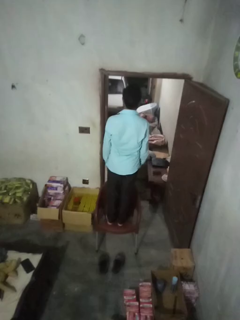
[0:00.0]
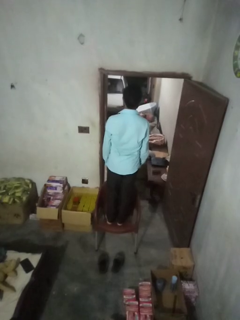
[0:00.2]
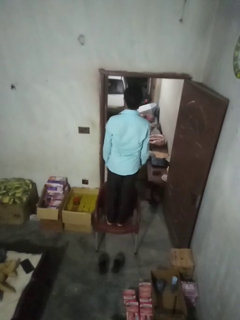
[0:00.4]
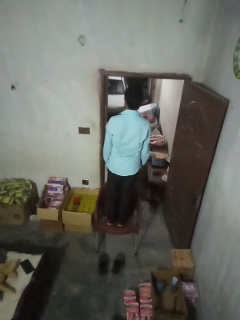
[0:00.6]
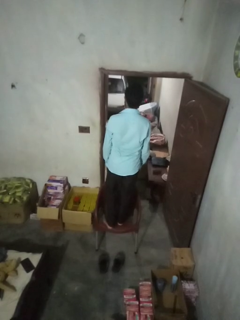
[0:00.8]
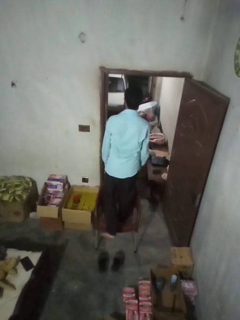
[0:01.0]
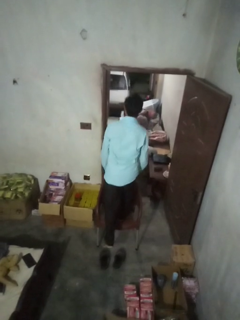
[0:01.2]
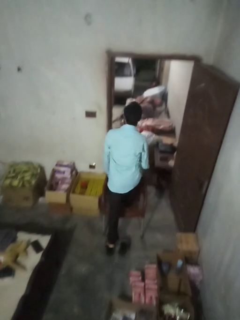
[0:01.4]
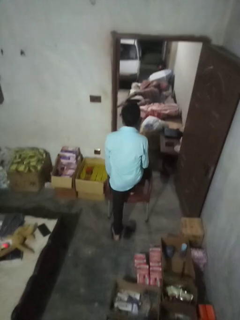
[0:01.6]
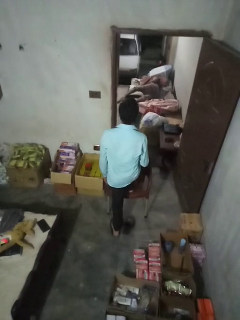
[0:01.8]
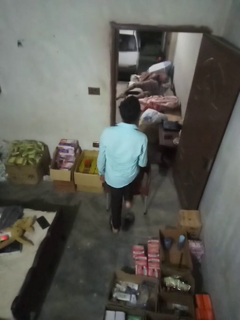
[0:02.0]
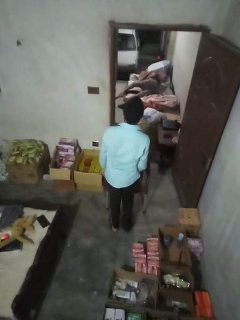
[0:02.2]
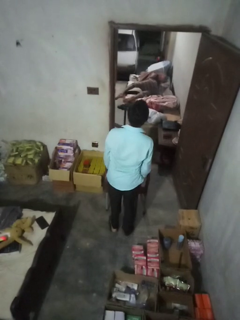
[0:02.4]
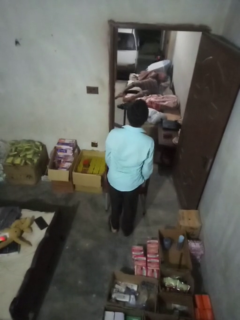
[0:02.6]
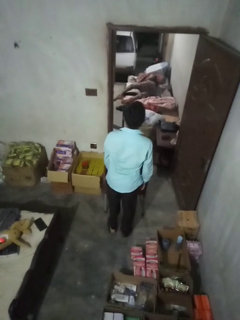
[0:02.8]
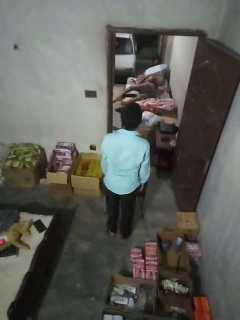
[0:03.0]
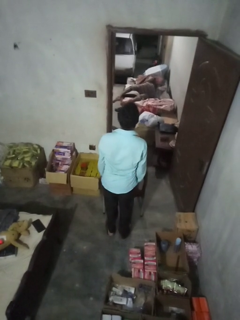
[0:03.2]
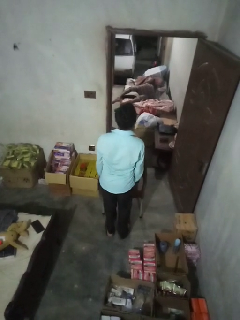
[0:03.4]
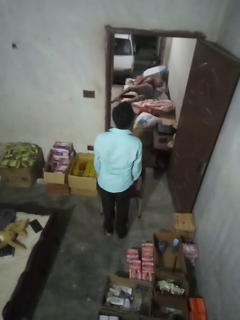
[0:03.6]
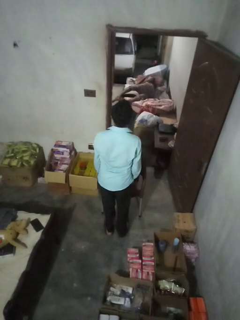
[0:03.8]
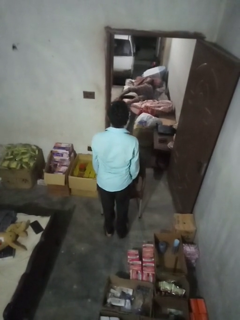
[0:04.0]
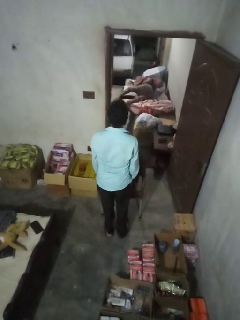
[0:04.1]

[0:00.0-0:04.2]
person climbs off chair

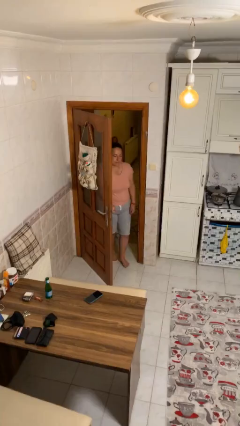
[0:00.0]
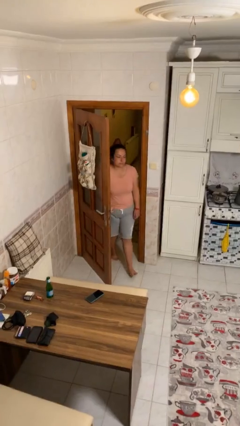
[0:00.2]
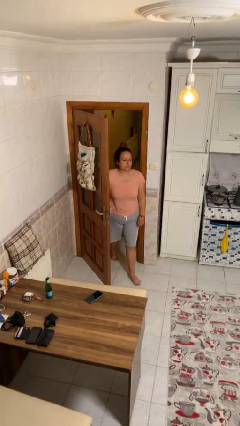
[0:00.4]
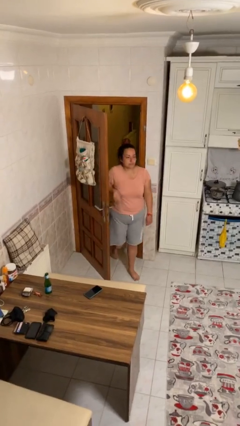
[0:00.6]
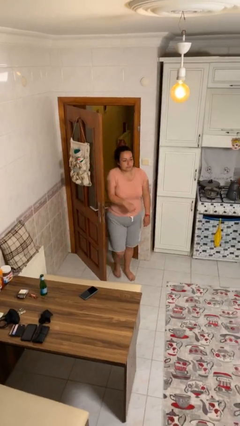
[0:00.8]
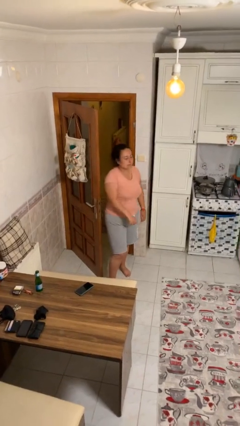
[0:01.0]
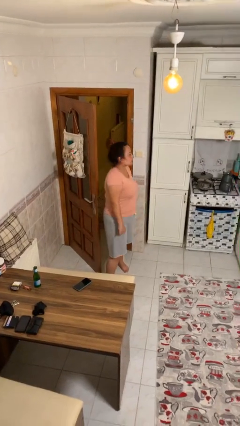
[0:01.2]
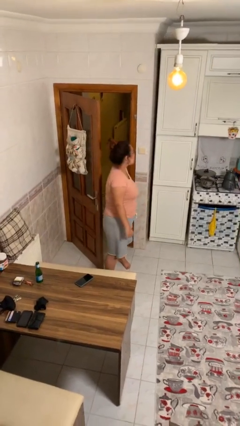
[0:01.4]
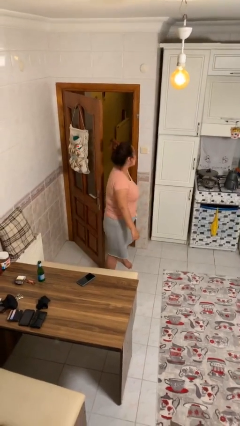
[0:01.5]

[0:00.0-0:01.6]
person enters scene through structure

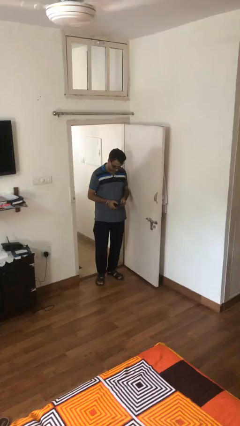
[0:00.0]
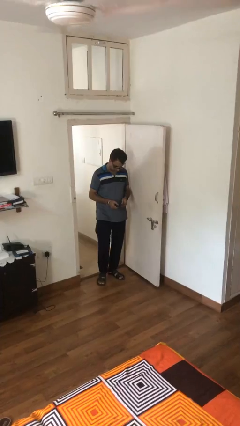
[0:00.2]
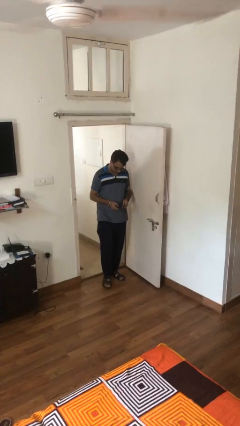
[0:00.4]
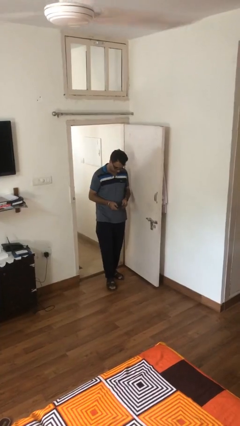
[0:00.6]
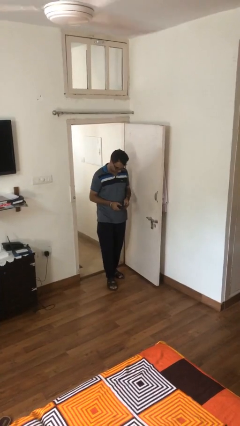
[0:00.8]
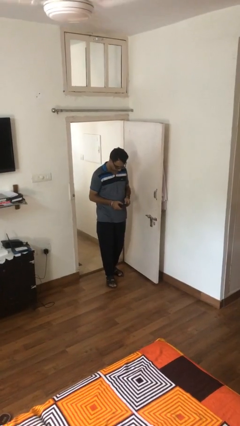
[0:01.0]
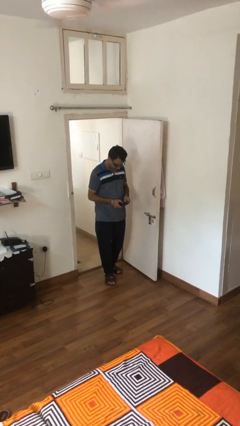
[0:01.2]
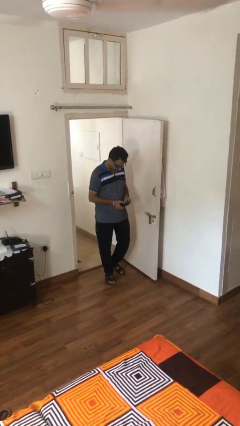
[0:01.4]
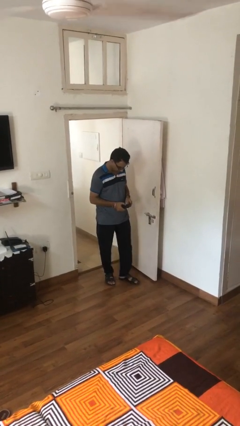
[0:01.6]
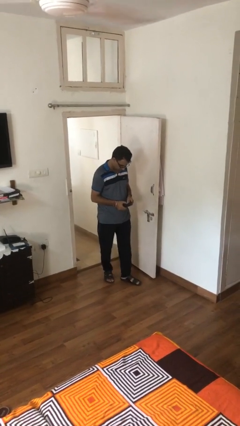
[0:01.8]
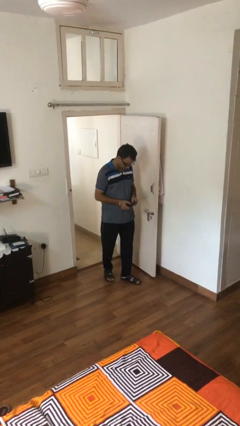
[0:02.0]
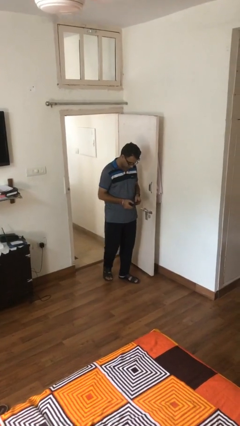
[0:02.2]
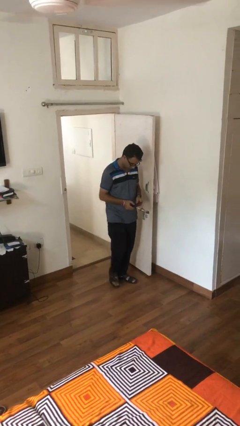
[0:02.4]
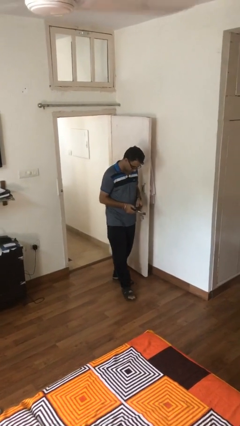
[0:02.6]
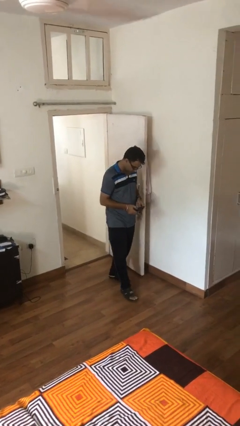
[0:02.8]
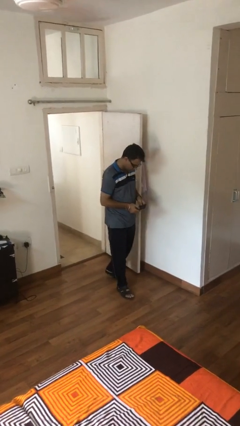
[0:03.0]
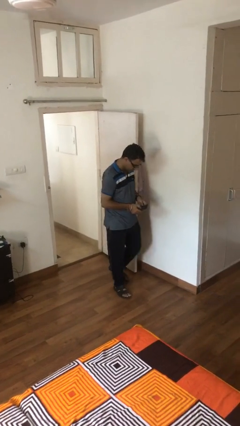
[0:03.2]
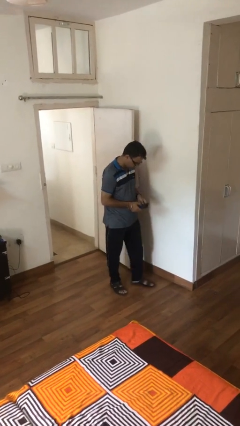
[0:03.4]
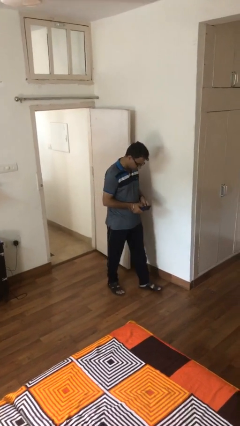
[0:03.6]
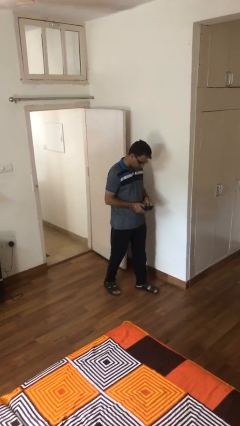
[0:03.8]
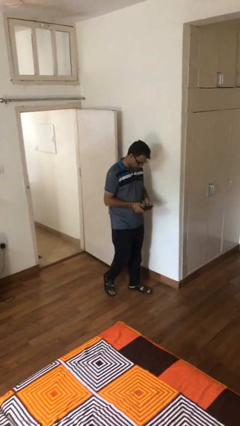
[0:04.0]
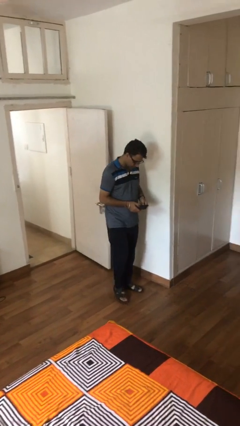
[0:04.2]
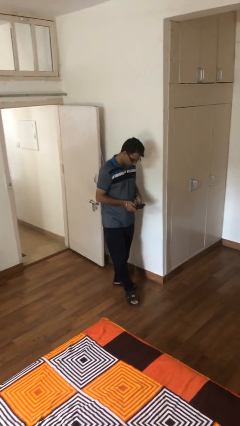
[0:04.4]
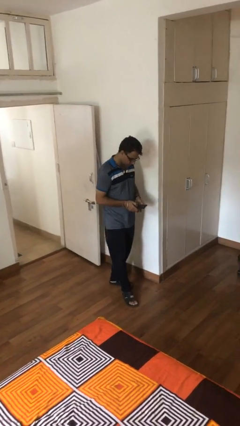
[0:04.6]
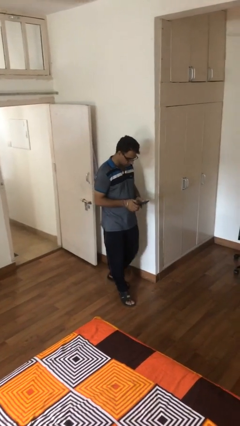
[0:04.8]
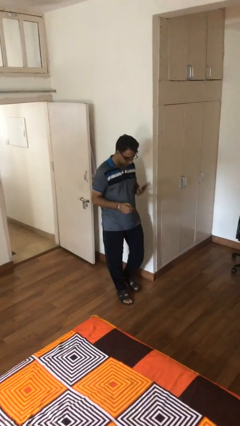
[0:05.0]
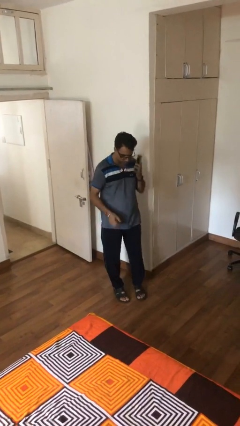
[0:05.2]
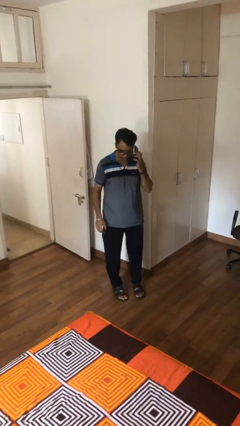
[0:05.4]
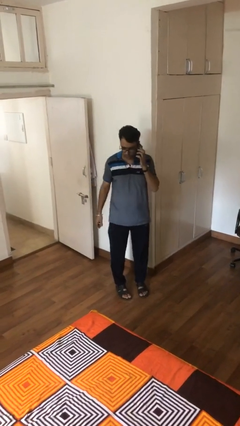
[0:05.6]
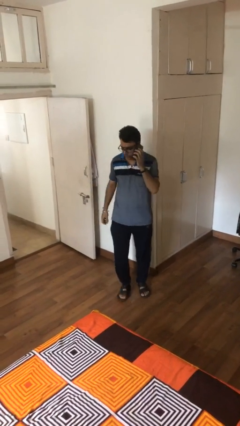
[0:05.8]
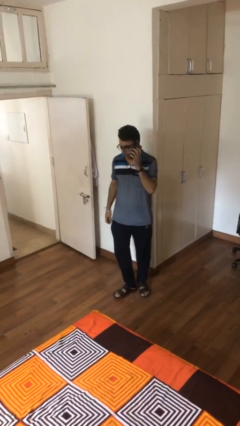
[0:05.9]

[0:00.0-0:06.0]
person texts on phone

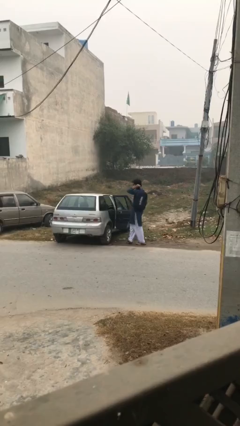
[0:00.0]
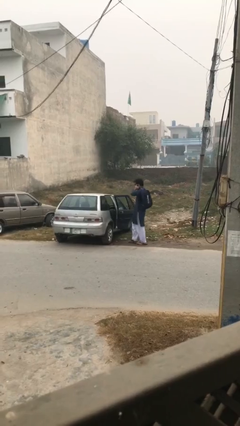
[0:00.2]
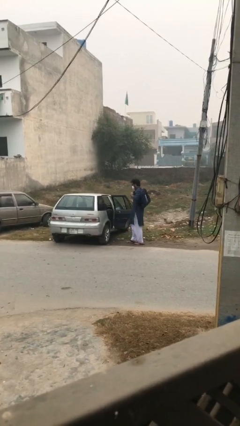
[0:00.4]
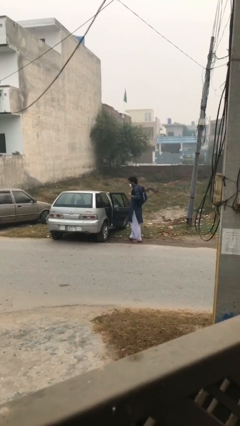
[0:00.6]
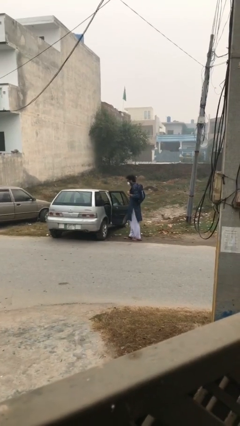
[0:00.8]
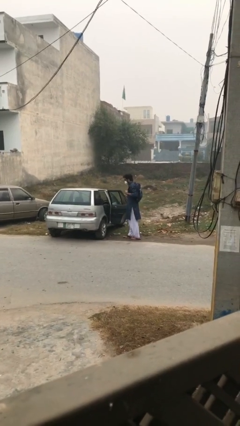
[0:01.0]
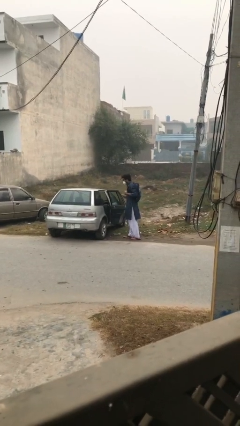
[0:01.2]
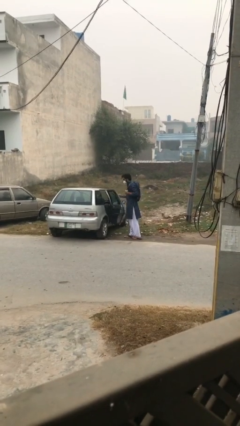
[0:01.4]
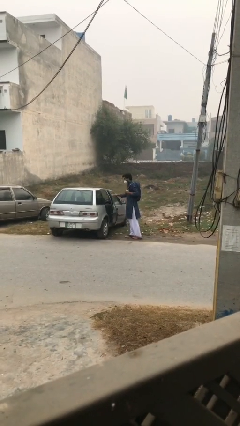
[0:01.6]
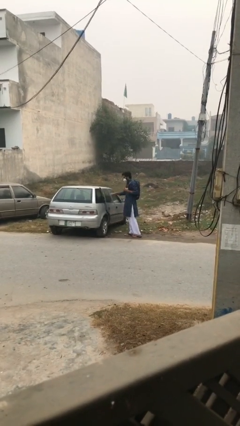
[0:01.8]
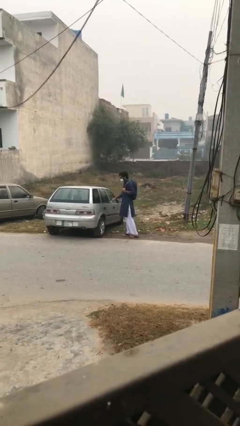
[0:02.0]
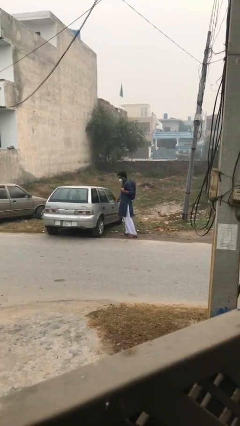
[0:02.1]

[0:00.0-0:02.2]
person closes car door

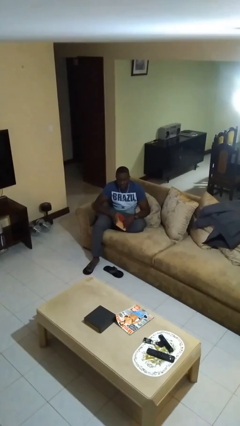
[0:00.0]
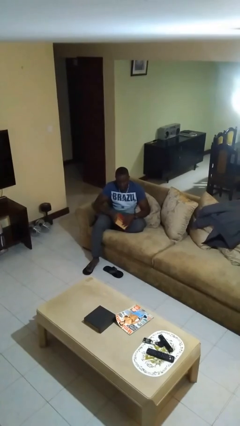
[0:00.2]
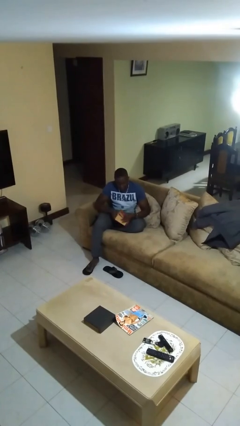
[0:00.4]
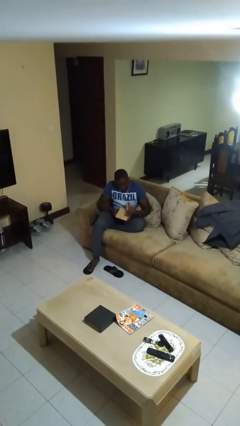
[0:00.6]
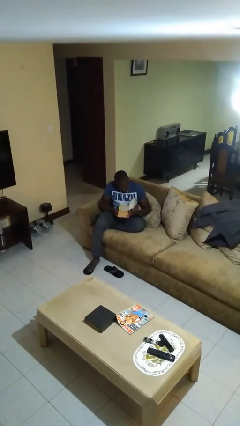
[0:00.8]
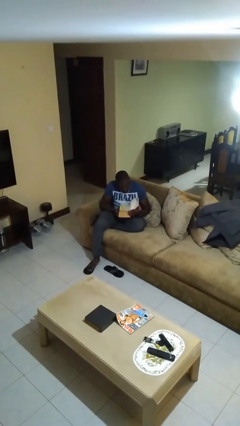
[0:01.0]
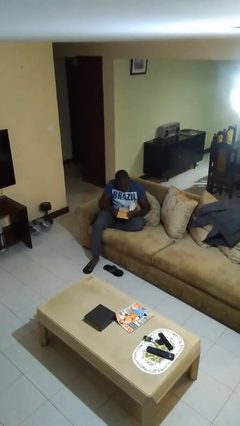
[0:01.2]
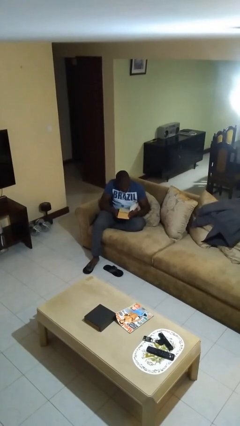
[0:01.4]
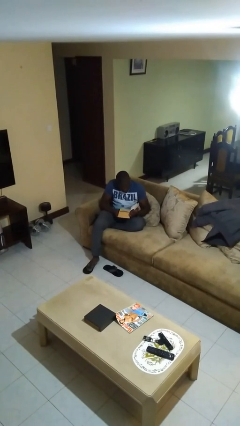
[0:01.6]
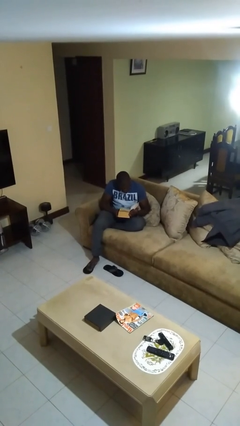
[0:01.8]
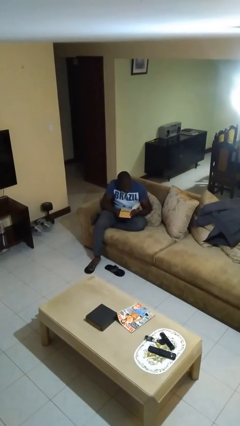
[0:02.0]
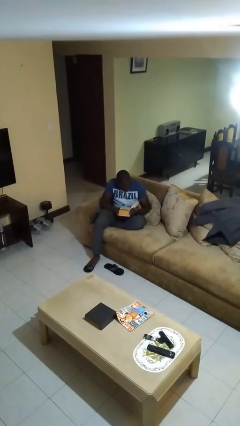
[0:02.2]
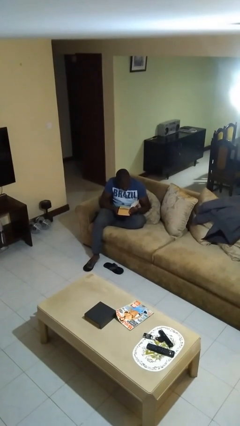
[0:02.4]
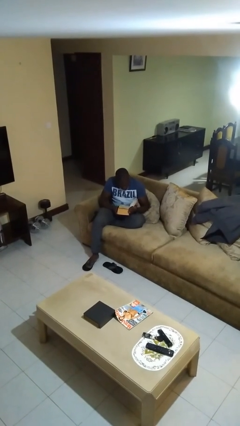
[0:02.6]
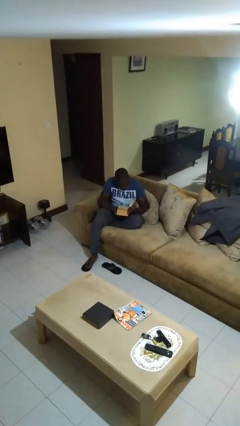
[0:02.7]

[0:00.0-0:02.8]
person reads book

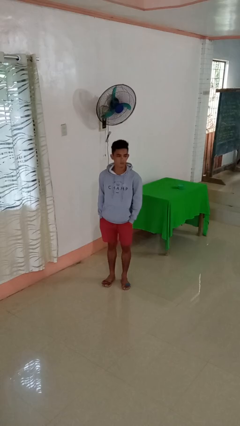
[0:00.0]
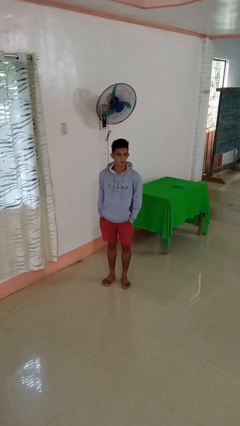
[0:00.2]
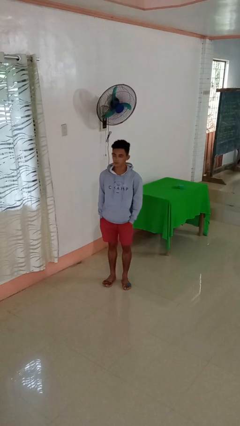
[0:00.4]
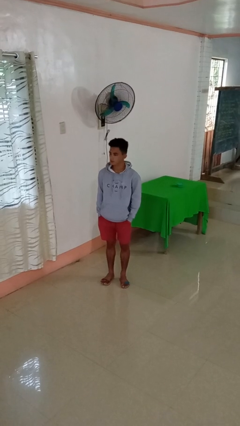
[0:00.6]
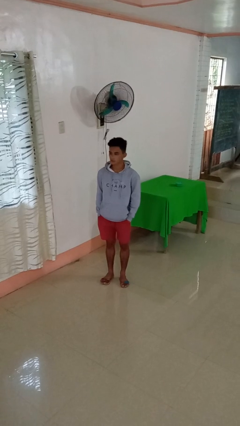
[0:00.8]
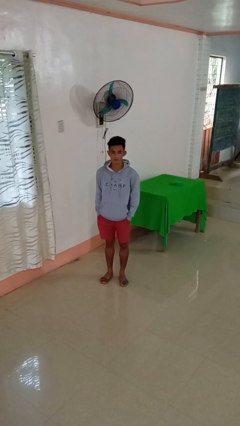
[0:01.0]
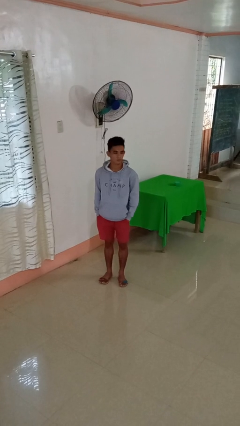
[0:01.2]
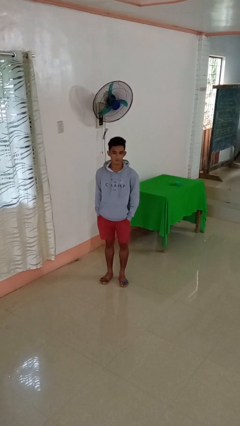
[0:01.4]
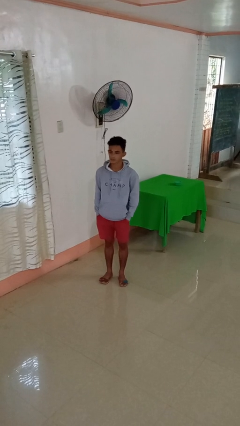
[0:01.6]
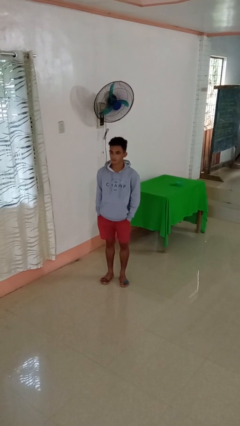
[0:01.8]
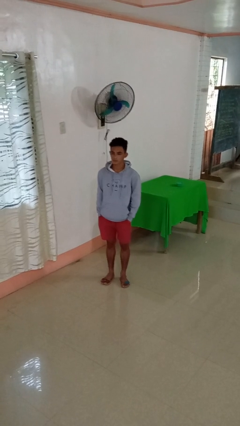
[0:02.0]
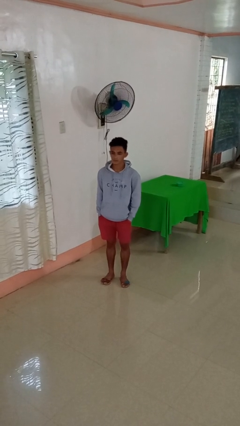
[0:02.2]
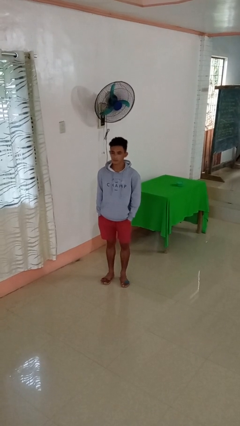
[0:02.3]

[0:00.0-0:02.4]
person shakes head
